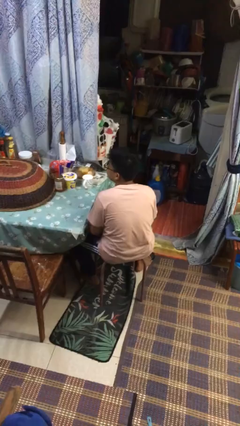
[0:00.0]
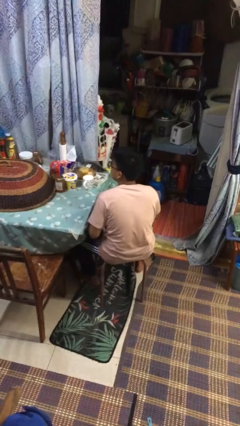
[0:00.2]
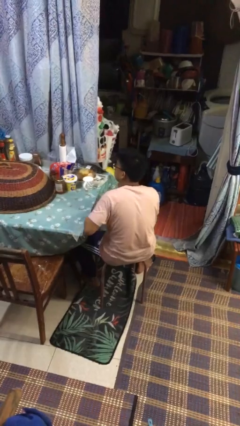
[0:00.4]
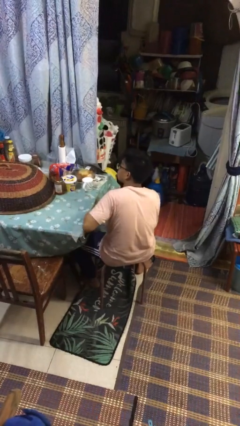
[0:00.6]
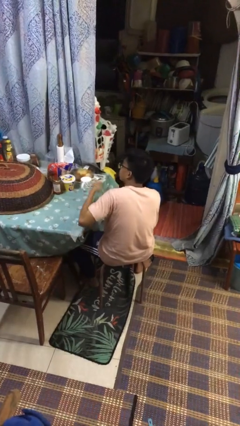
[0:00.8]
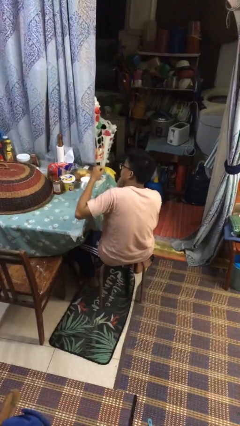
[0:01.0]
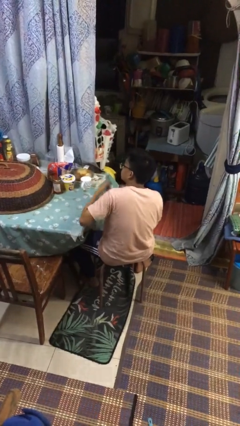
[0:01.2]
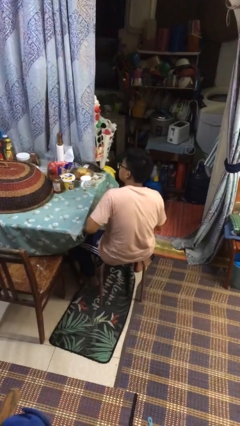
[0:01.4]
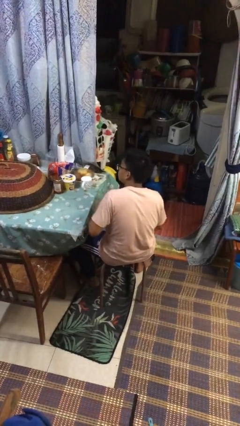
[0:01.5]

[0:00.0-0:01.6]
person drums on chest

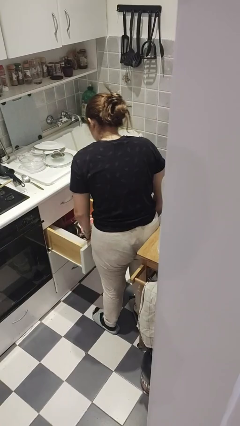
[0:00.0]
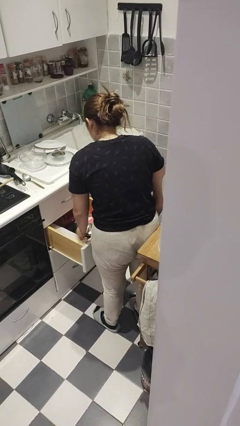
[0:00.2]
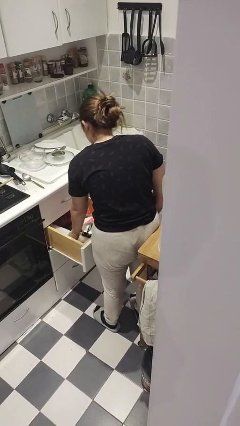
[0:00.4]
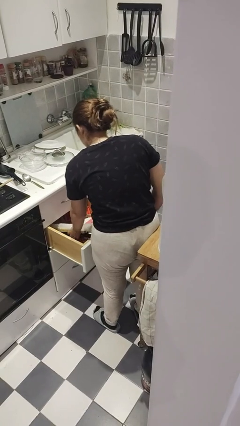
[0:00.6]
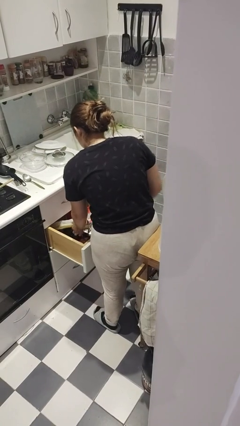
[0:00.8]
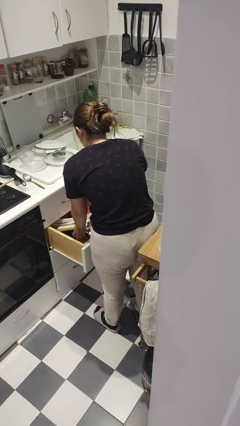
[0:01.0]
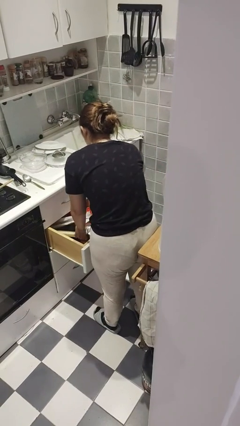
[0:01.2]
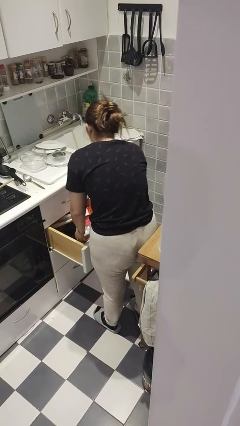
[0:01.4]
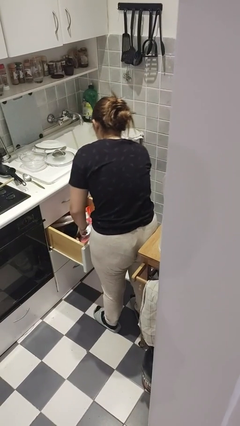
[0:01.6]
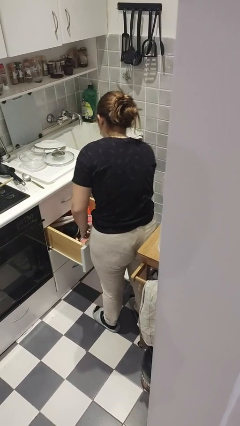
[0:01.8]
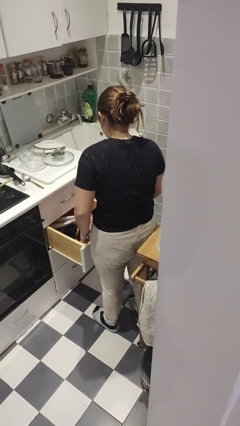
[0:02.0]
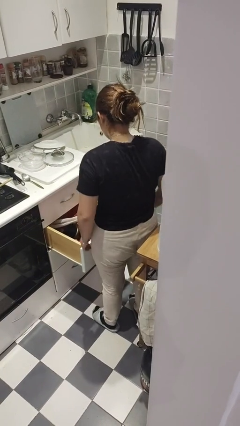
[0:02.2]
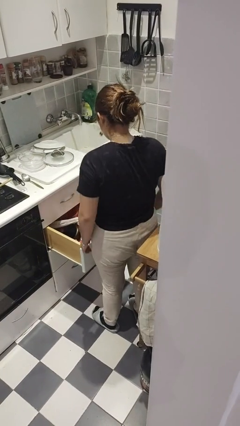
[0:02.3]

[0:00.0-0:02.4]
person searches in kitchen drawer

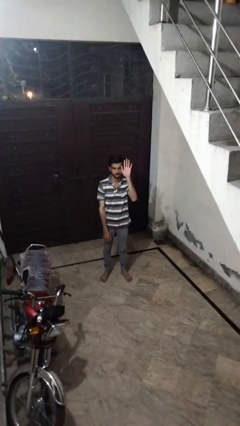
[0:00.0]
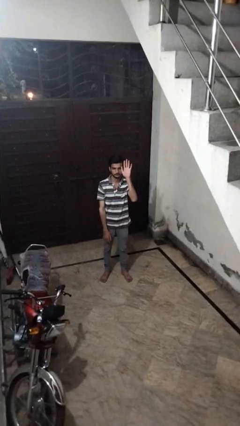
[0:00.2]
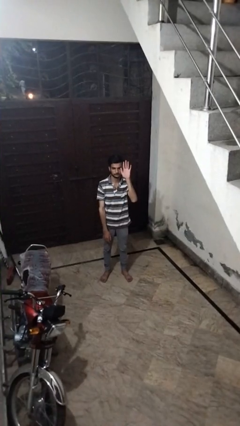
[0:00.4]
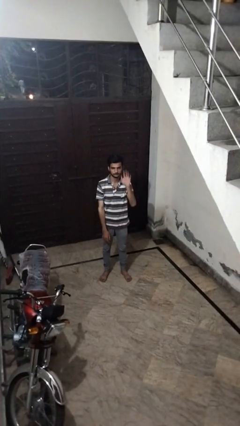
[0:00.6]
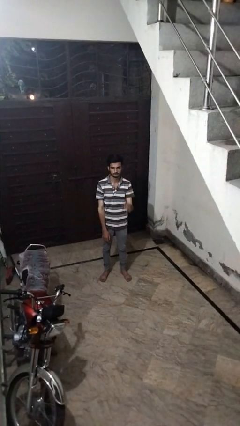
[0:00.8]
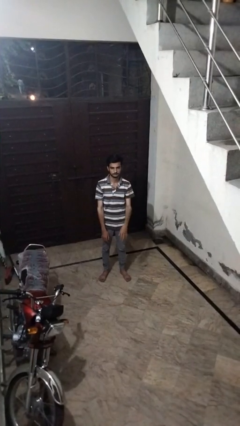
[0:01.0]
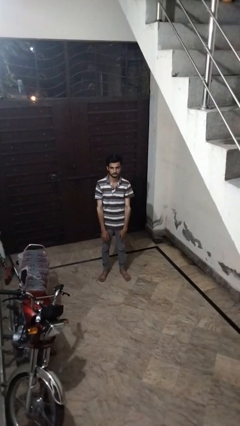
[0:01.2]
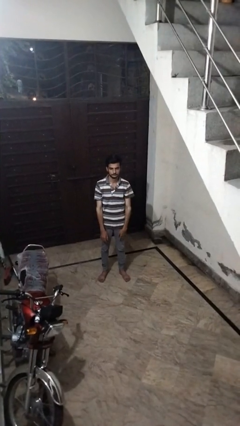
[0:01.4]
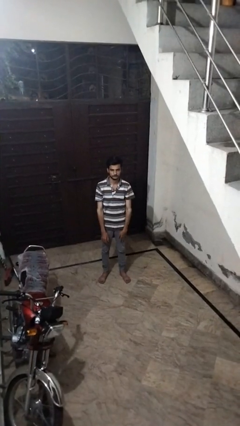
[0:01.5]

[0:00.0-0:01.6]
person gestures lower hand

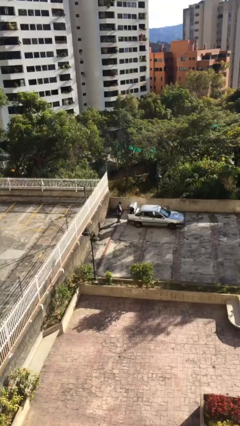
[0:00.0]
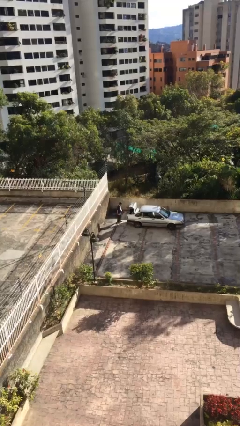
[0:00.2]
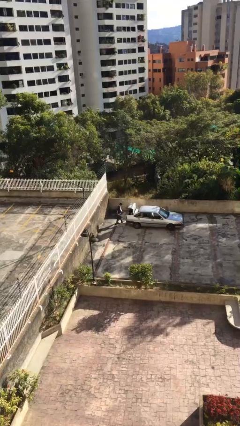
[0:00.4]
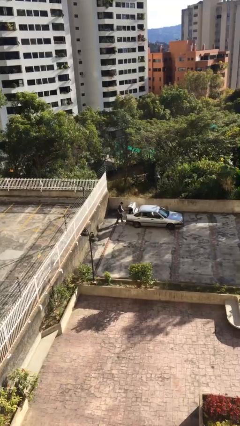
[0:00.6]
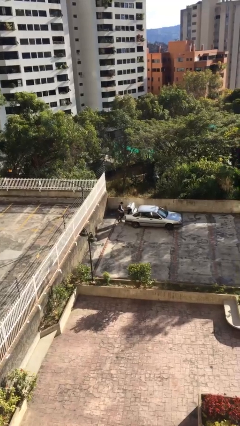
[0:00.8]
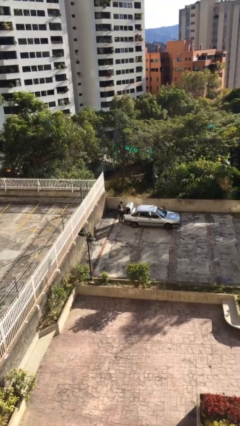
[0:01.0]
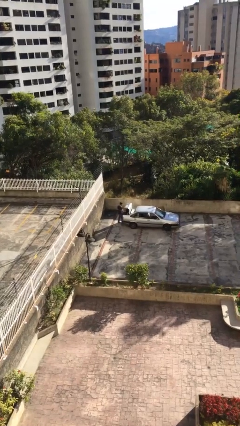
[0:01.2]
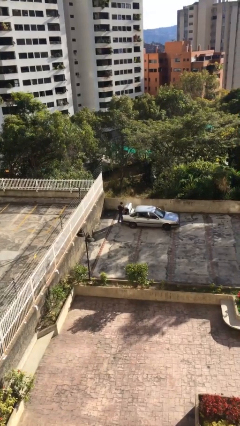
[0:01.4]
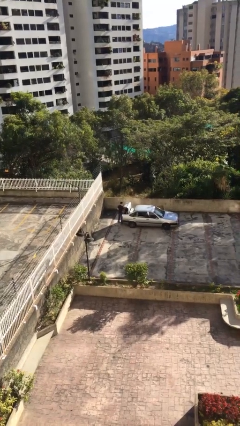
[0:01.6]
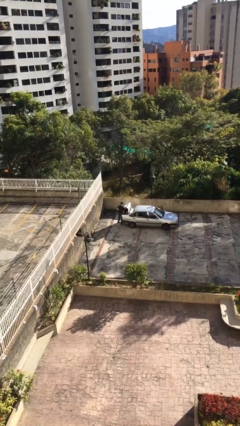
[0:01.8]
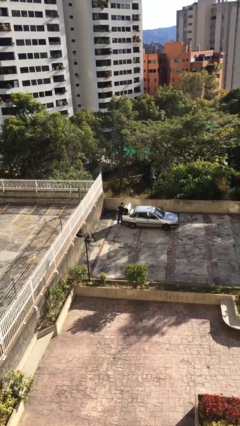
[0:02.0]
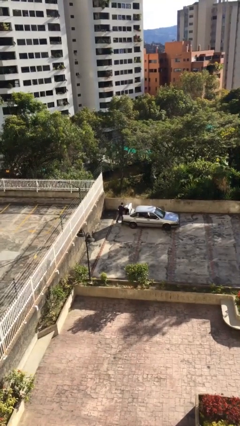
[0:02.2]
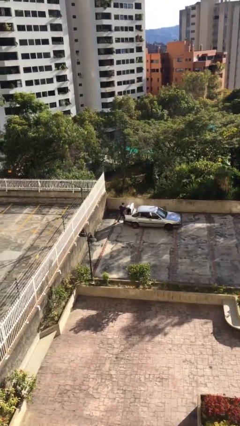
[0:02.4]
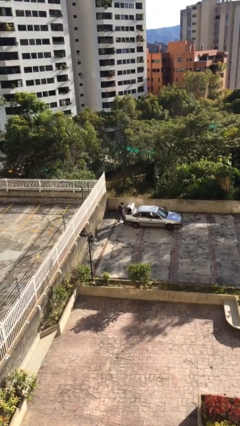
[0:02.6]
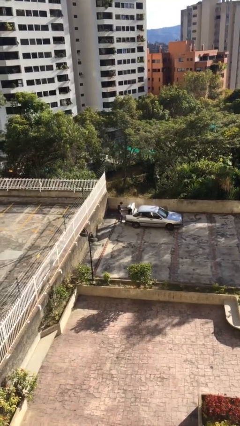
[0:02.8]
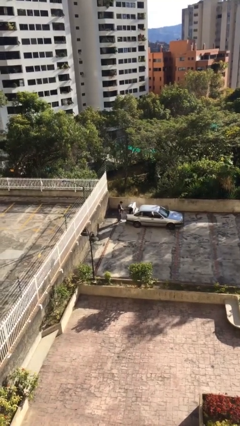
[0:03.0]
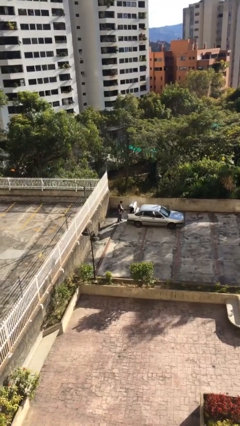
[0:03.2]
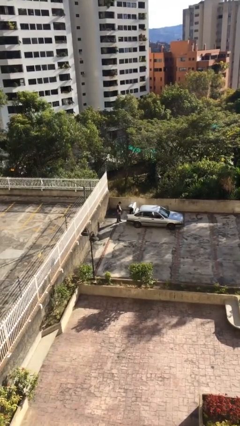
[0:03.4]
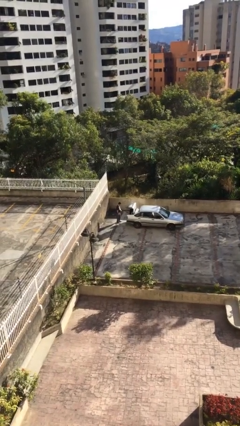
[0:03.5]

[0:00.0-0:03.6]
person loads car

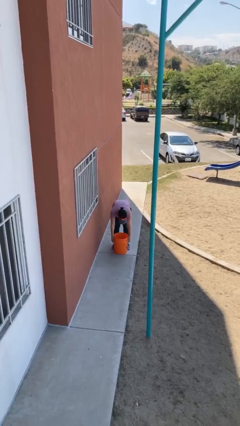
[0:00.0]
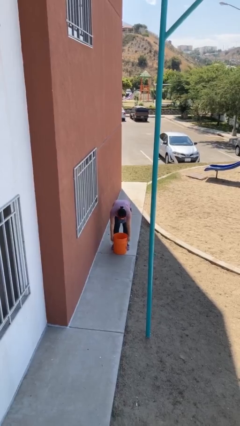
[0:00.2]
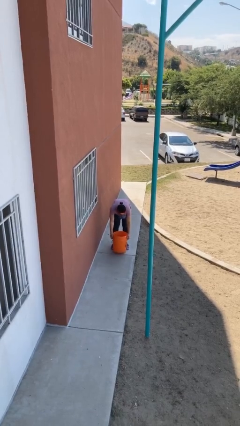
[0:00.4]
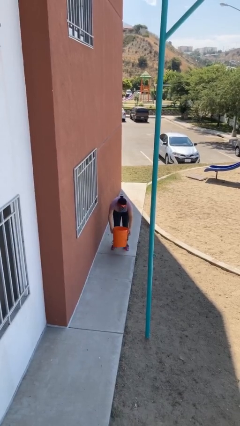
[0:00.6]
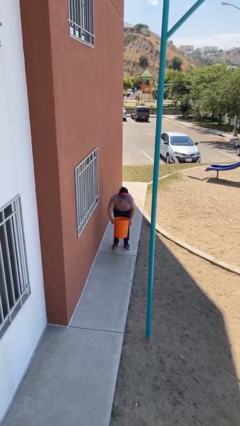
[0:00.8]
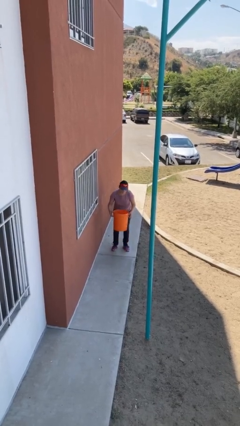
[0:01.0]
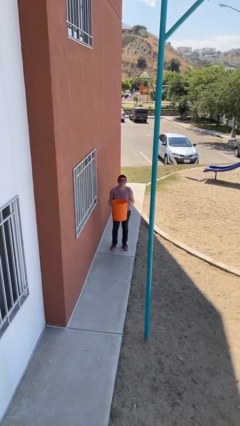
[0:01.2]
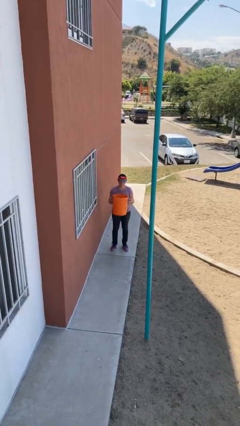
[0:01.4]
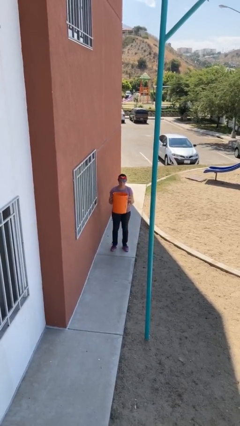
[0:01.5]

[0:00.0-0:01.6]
person picks up object from floor

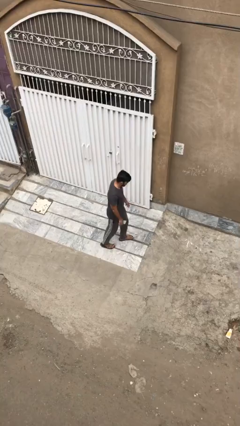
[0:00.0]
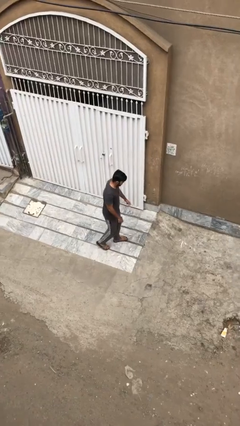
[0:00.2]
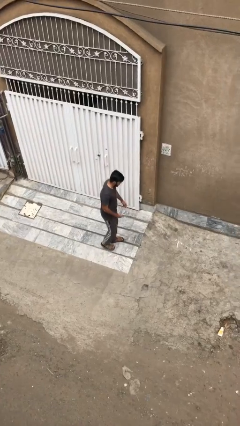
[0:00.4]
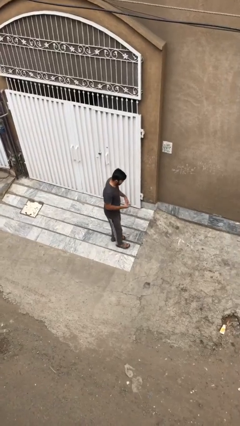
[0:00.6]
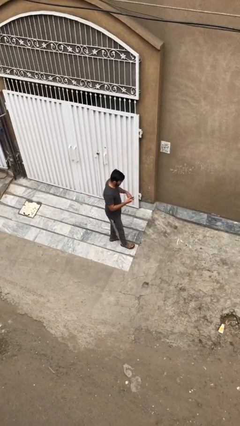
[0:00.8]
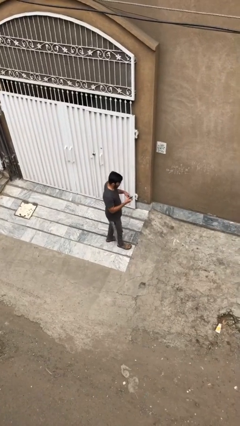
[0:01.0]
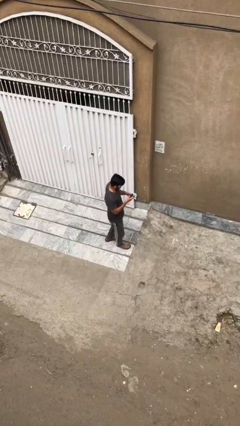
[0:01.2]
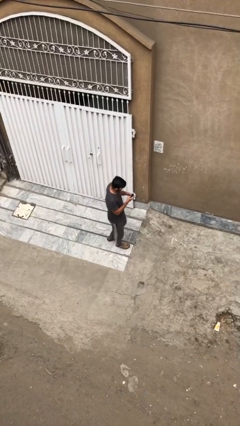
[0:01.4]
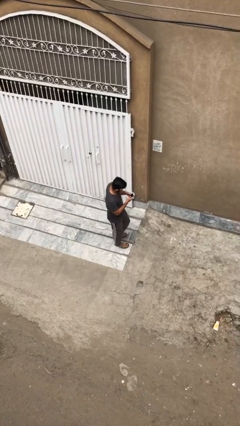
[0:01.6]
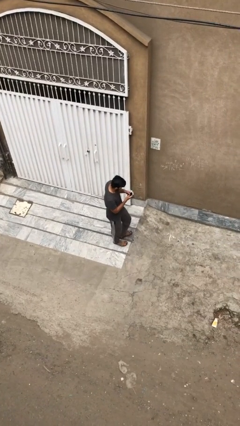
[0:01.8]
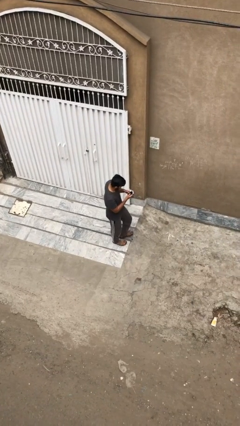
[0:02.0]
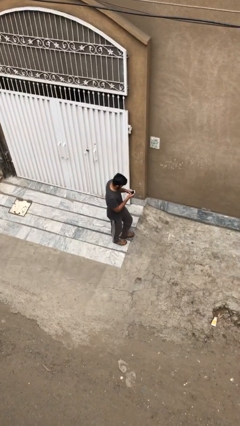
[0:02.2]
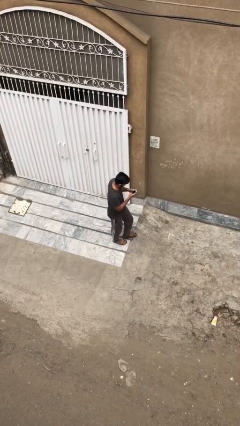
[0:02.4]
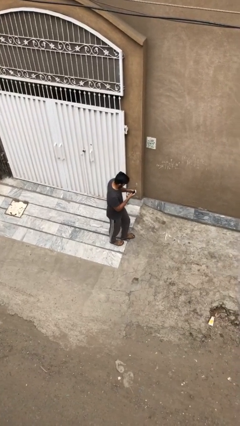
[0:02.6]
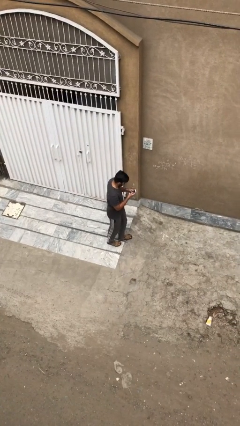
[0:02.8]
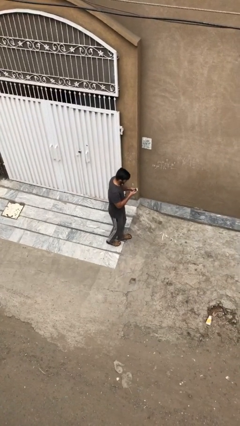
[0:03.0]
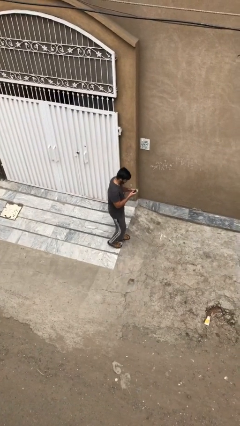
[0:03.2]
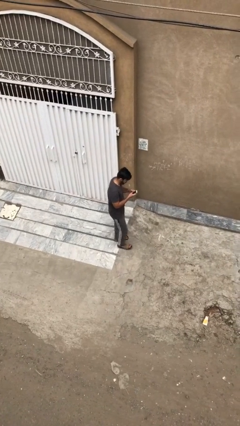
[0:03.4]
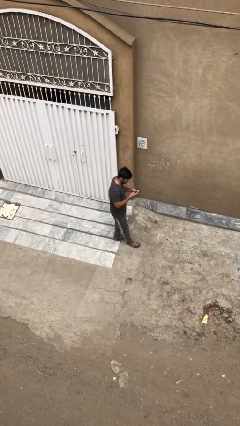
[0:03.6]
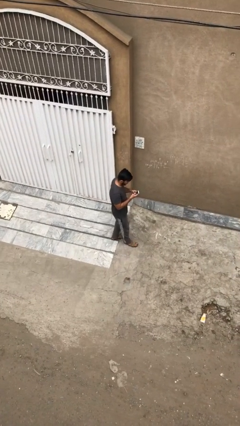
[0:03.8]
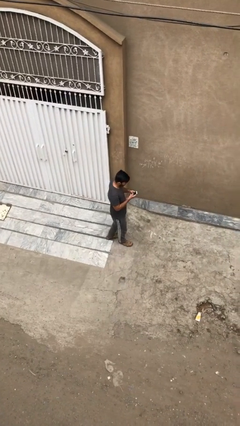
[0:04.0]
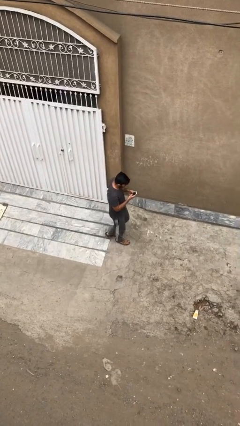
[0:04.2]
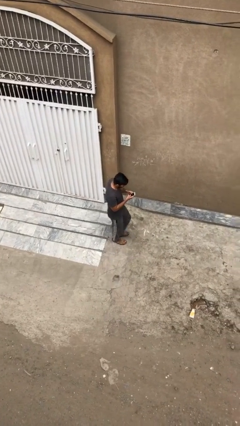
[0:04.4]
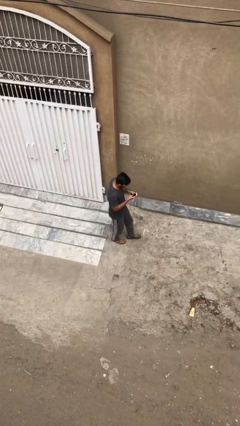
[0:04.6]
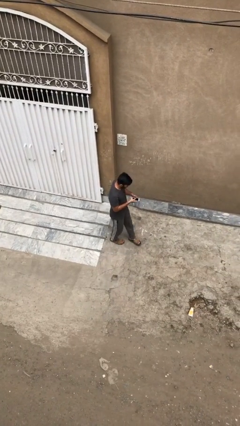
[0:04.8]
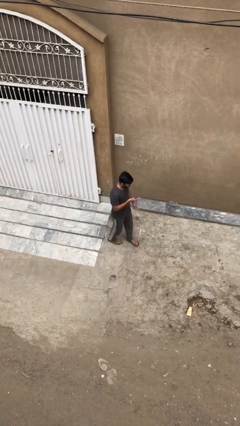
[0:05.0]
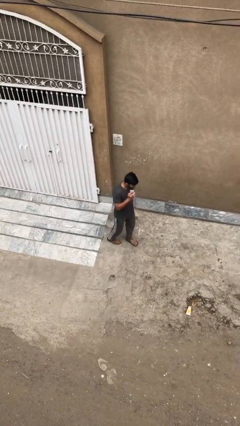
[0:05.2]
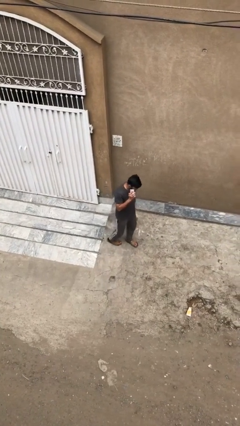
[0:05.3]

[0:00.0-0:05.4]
person texts on phone

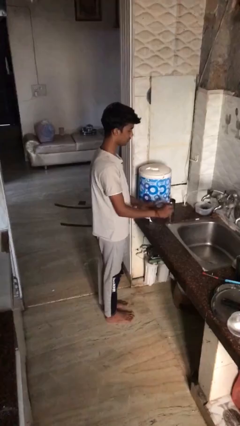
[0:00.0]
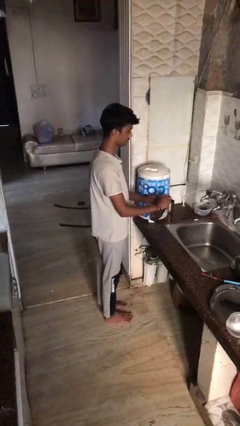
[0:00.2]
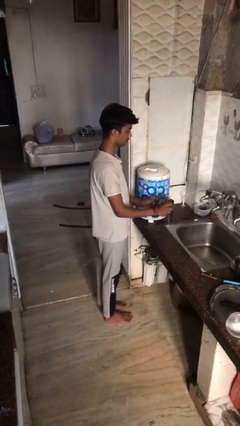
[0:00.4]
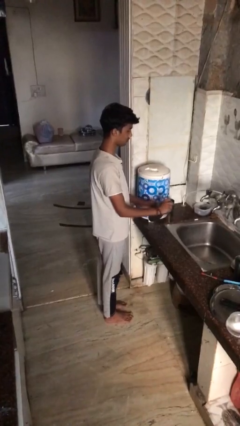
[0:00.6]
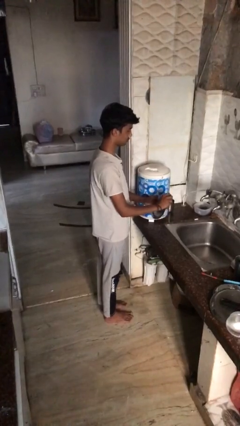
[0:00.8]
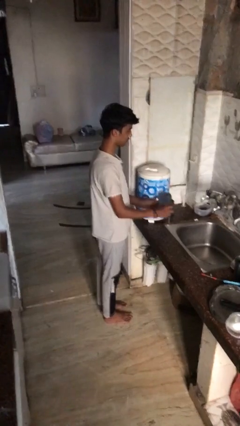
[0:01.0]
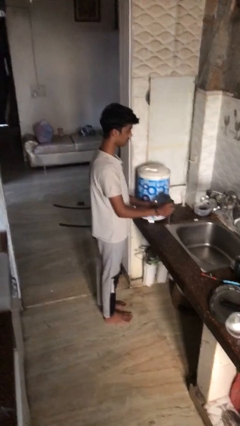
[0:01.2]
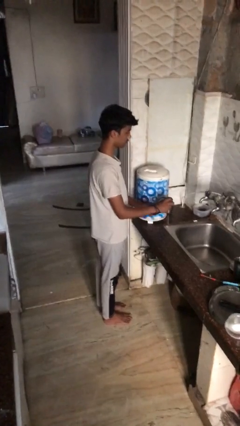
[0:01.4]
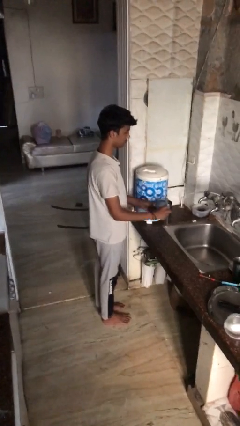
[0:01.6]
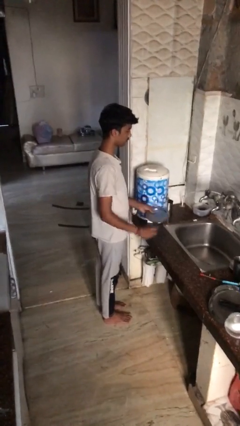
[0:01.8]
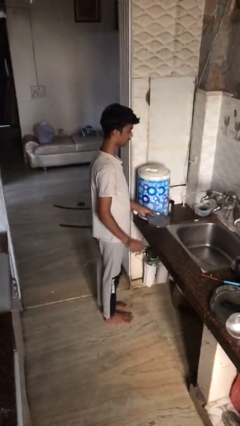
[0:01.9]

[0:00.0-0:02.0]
person dries dish
